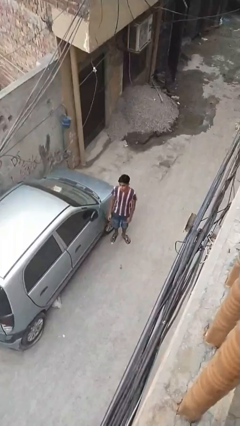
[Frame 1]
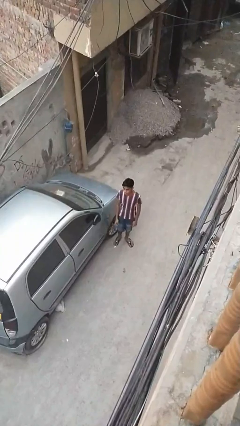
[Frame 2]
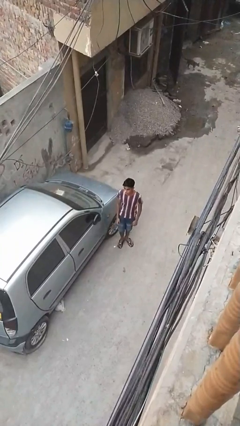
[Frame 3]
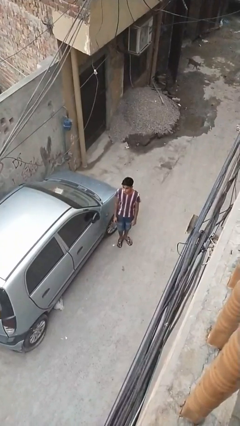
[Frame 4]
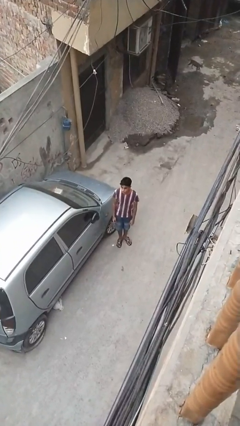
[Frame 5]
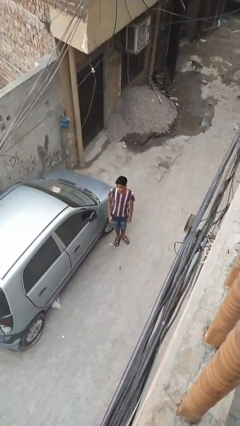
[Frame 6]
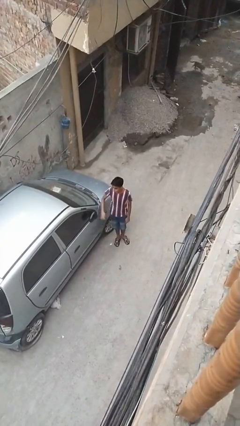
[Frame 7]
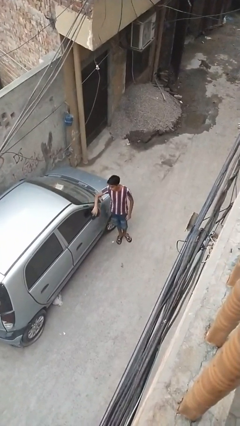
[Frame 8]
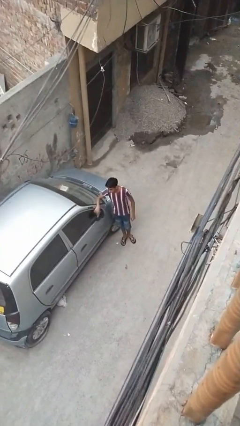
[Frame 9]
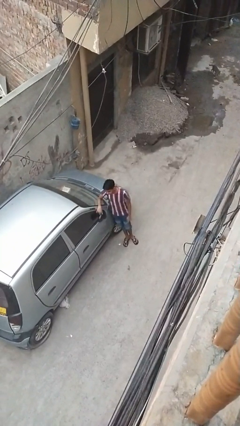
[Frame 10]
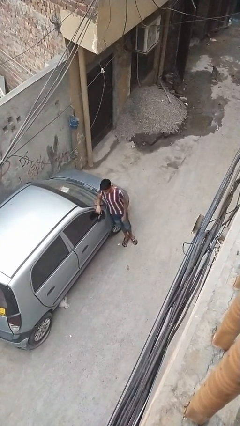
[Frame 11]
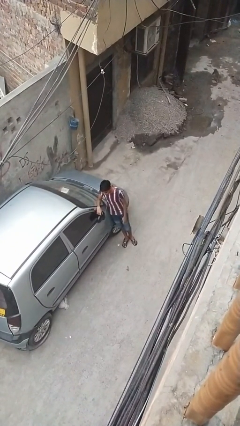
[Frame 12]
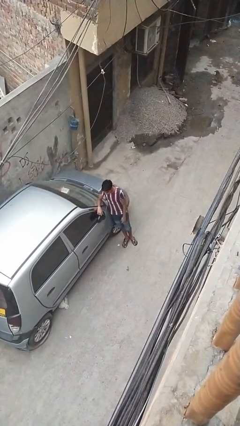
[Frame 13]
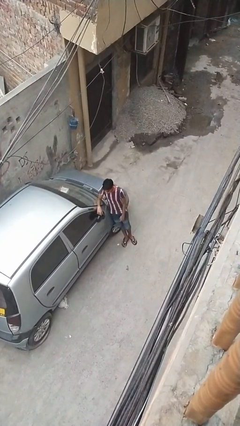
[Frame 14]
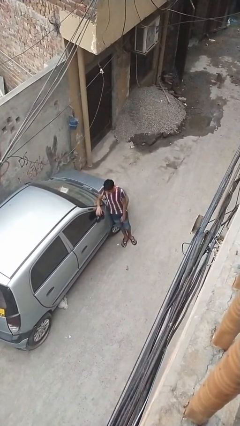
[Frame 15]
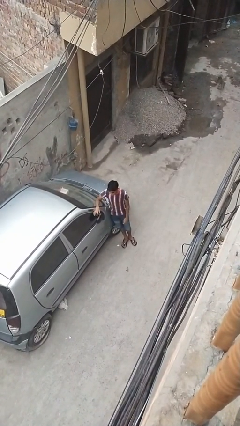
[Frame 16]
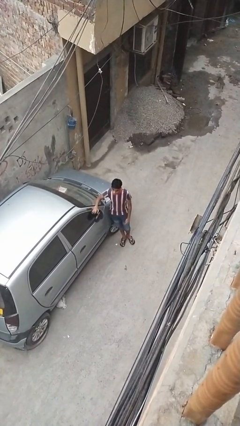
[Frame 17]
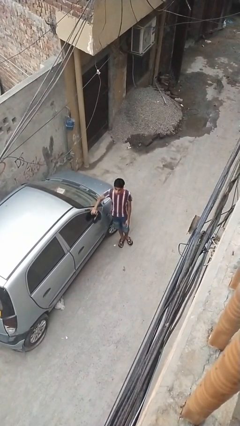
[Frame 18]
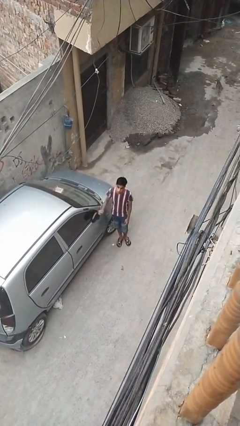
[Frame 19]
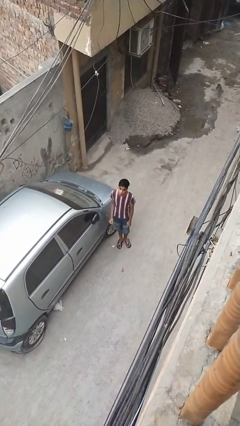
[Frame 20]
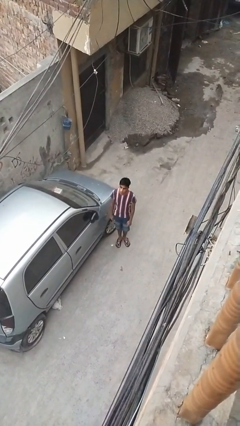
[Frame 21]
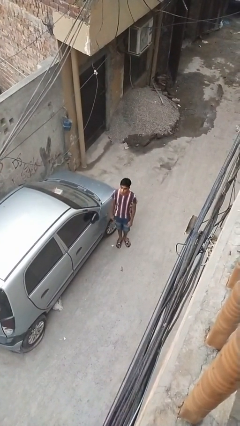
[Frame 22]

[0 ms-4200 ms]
person leans against car

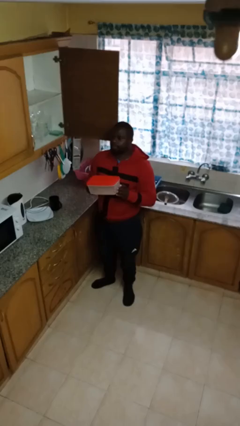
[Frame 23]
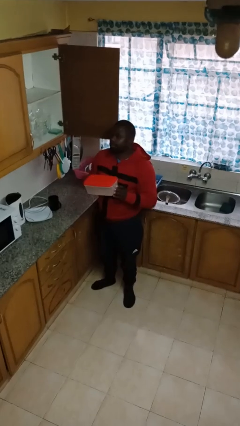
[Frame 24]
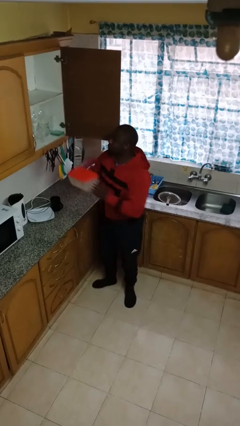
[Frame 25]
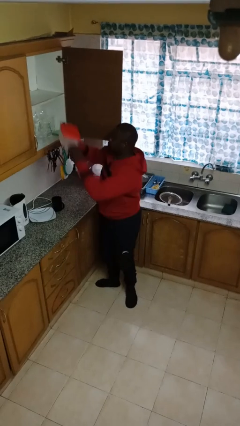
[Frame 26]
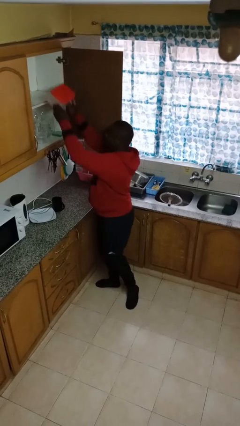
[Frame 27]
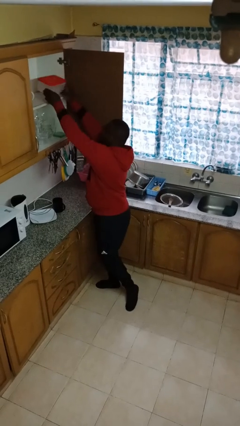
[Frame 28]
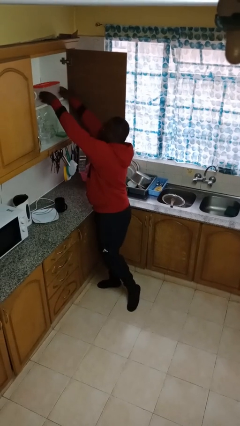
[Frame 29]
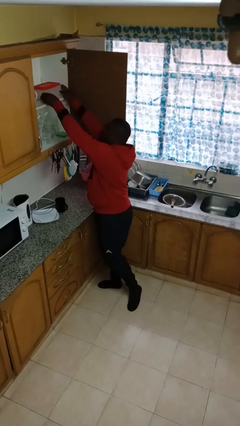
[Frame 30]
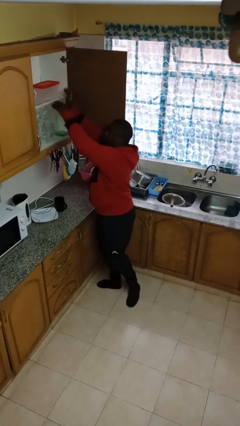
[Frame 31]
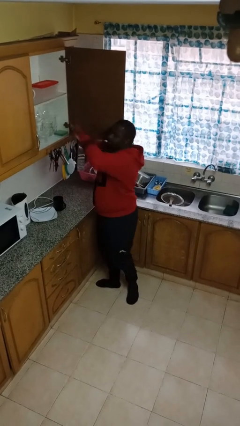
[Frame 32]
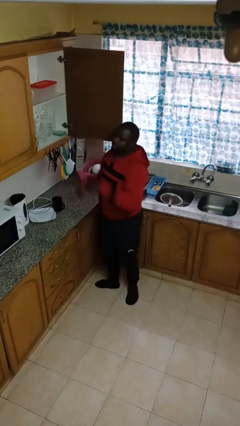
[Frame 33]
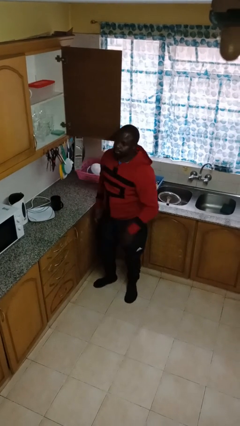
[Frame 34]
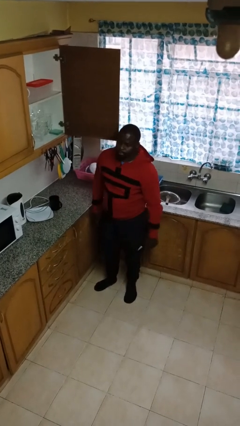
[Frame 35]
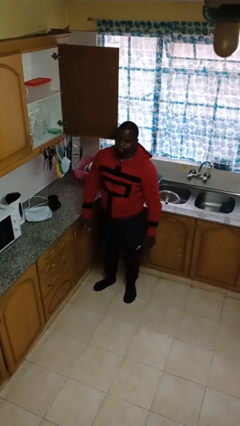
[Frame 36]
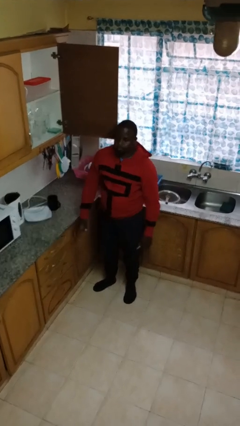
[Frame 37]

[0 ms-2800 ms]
person puts down object into cabinet

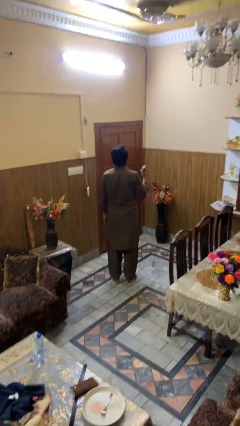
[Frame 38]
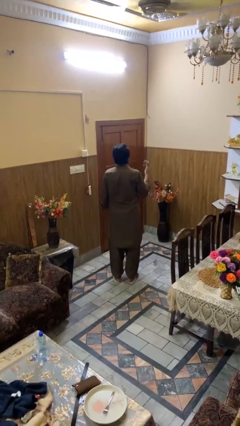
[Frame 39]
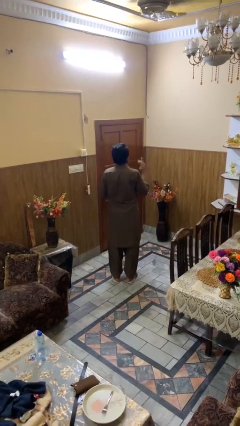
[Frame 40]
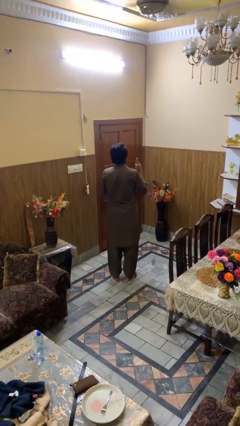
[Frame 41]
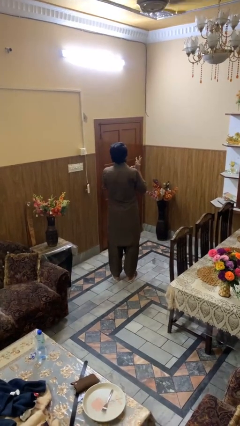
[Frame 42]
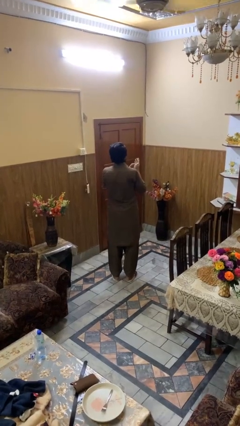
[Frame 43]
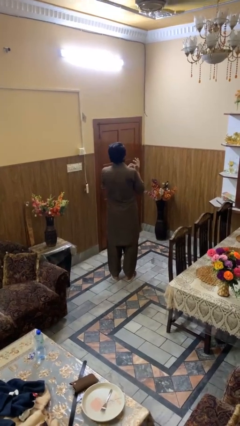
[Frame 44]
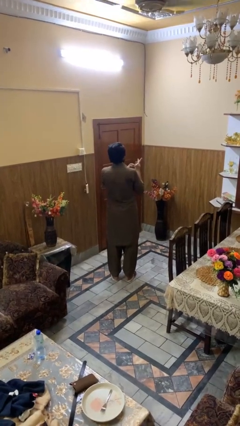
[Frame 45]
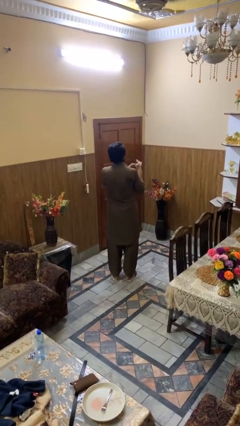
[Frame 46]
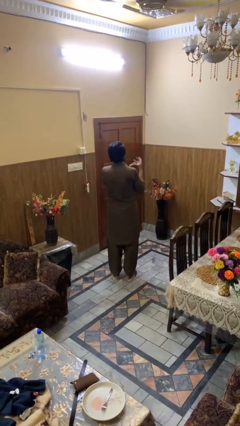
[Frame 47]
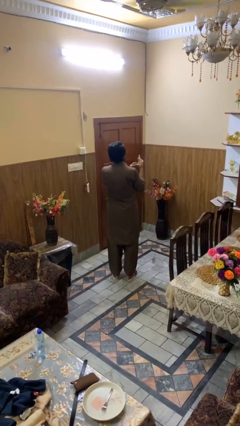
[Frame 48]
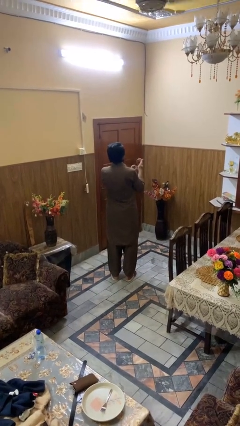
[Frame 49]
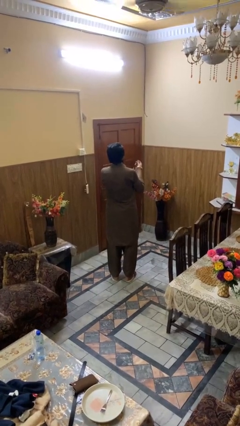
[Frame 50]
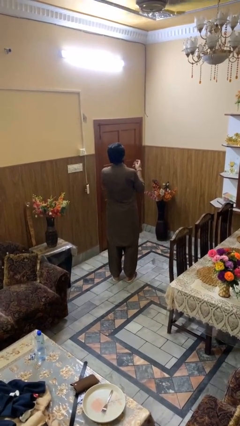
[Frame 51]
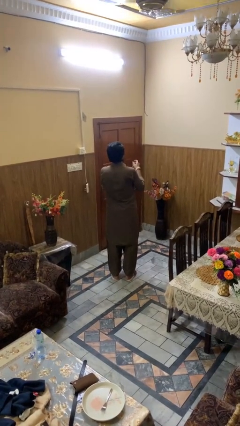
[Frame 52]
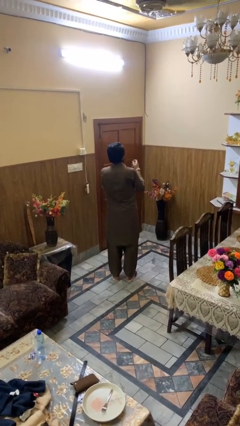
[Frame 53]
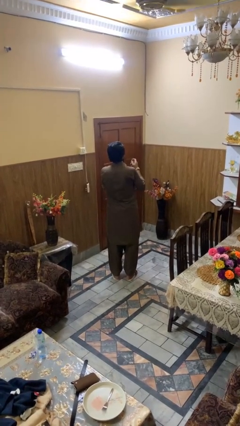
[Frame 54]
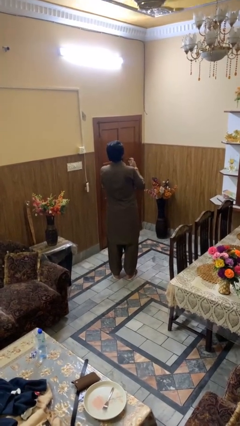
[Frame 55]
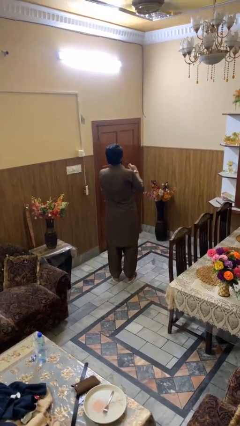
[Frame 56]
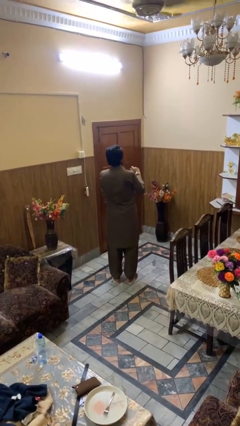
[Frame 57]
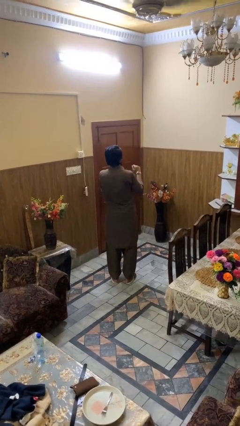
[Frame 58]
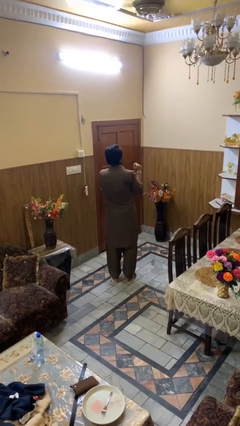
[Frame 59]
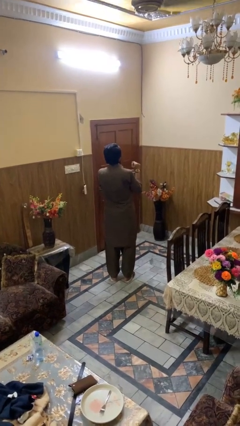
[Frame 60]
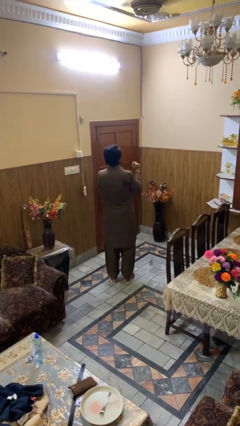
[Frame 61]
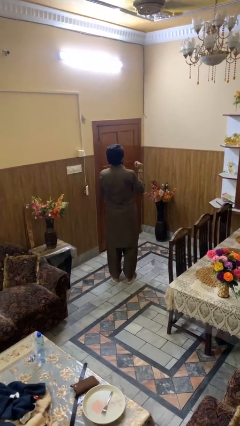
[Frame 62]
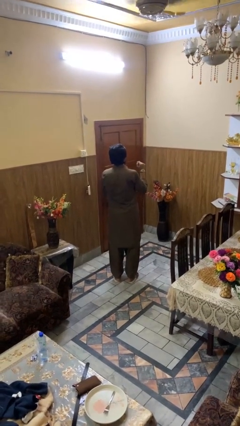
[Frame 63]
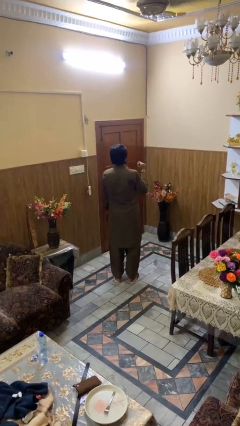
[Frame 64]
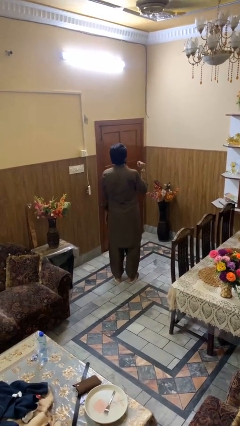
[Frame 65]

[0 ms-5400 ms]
person puts on wristwatch

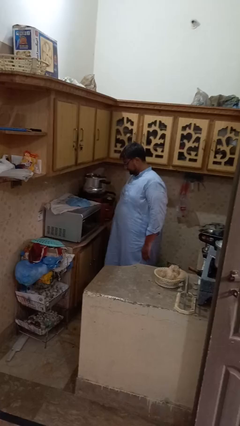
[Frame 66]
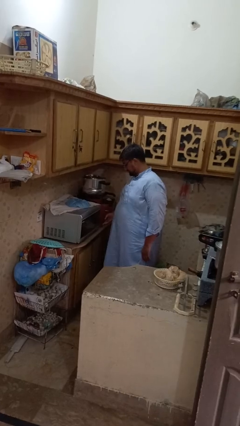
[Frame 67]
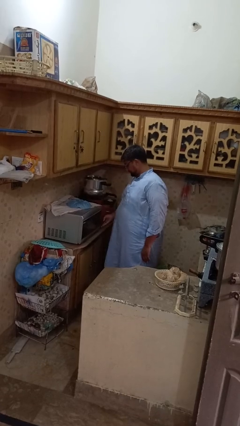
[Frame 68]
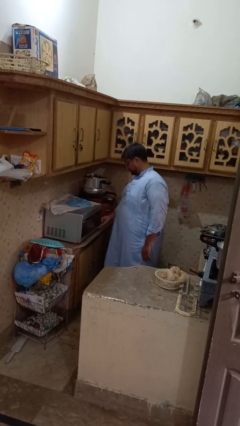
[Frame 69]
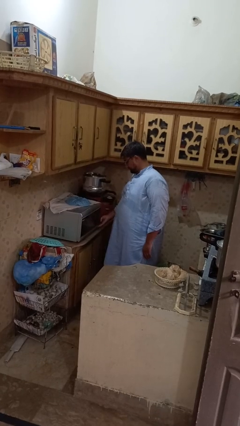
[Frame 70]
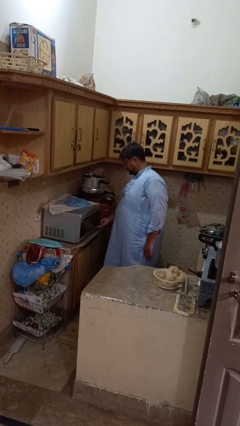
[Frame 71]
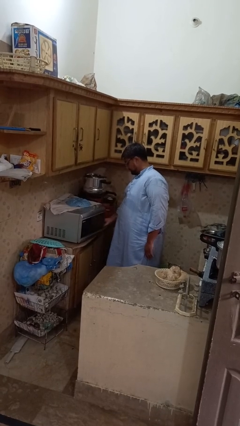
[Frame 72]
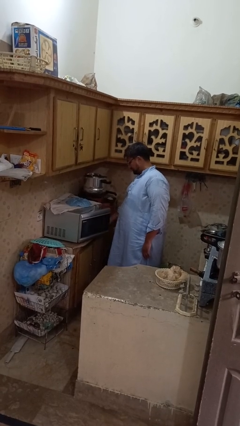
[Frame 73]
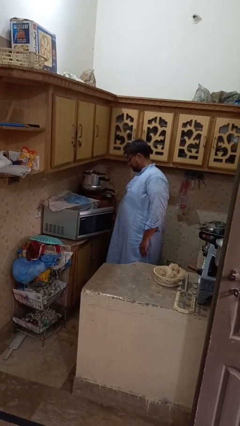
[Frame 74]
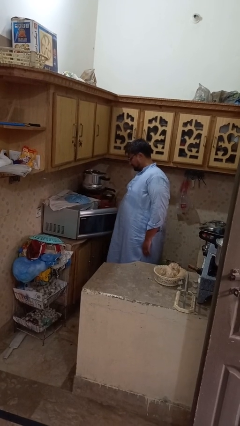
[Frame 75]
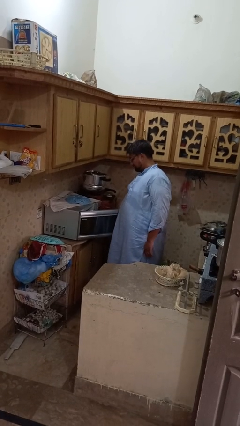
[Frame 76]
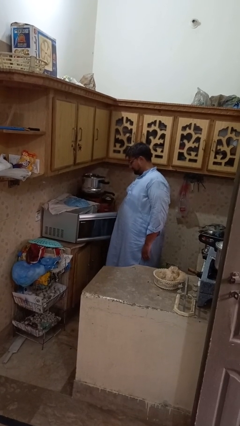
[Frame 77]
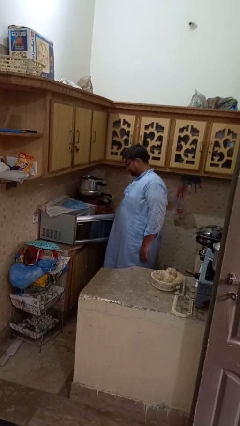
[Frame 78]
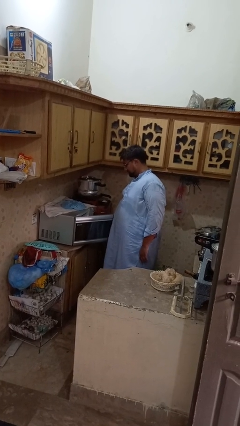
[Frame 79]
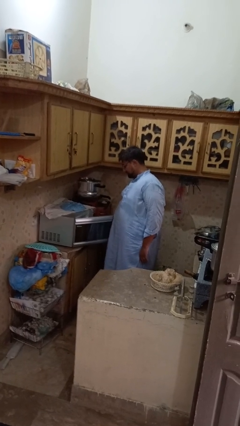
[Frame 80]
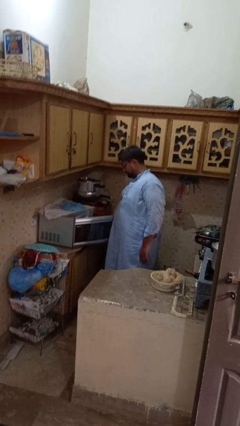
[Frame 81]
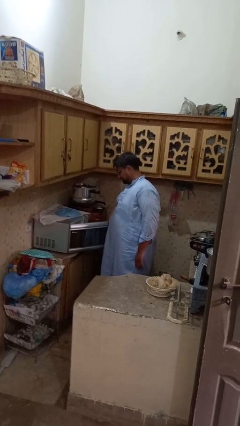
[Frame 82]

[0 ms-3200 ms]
person opens microwave

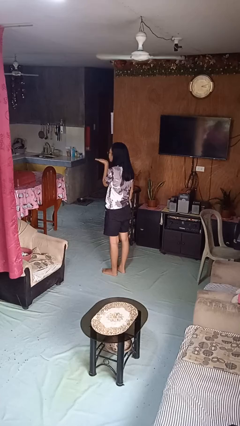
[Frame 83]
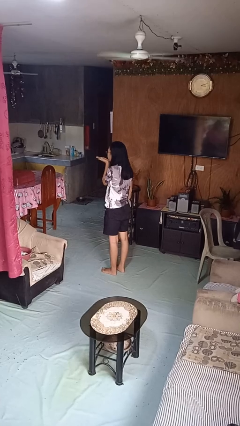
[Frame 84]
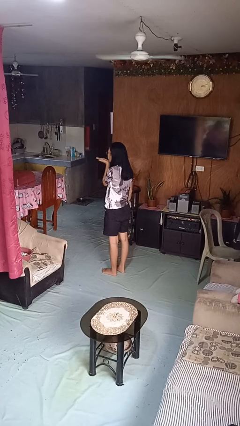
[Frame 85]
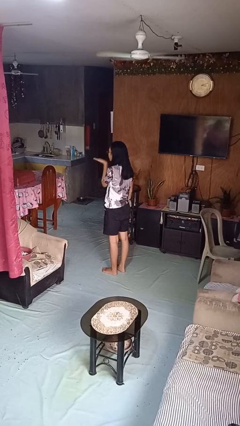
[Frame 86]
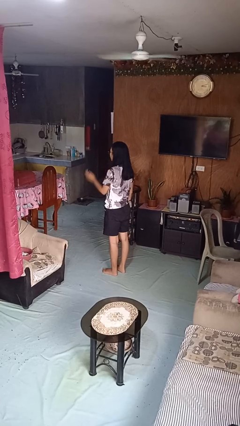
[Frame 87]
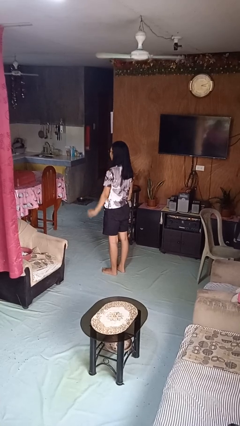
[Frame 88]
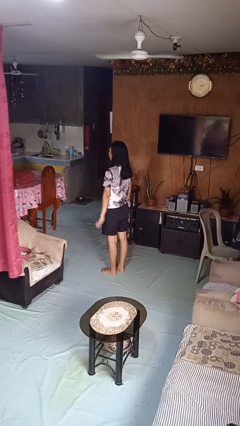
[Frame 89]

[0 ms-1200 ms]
person gestures blow kiss

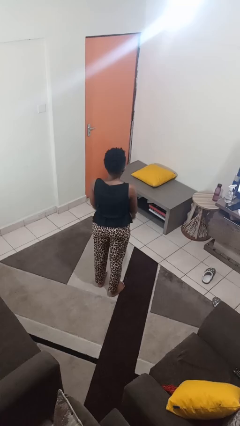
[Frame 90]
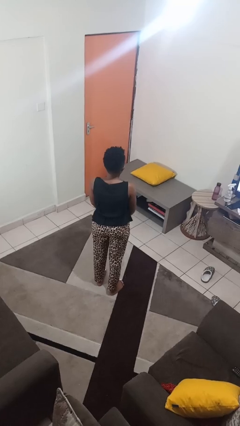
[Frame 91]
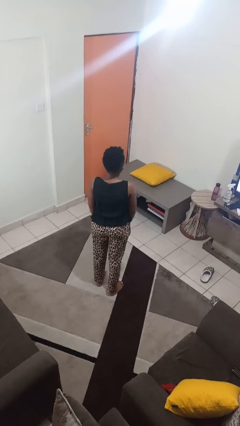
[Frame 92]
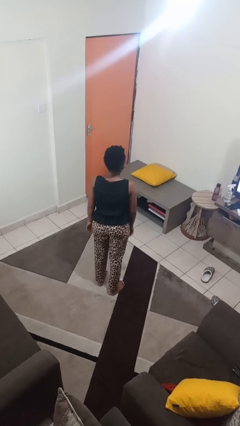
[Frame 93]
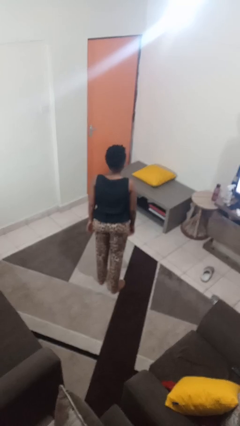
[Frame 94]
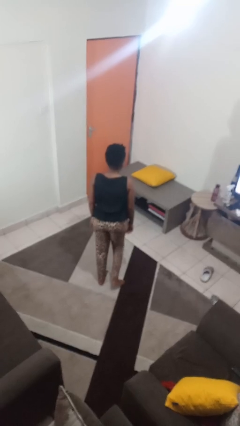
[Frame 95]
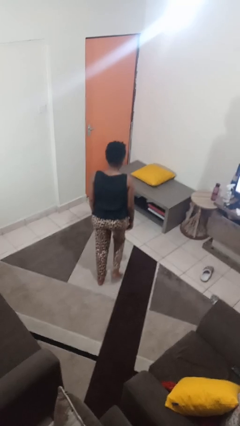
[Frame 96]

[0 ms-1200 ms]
person throws object on table
